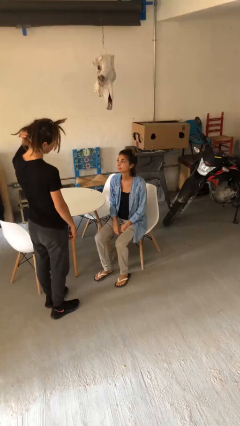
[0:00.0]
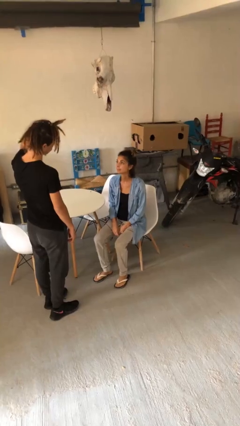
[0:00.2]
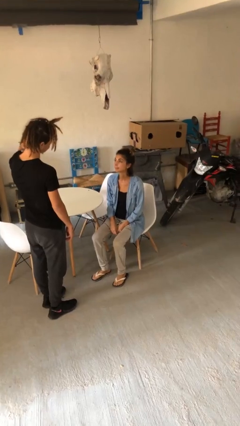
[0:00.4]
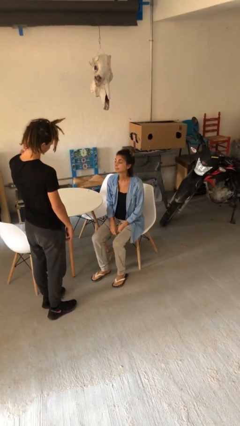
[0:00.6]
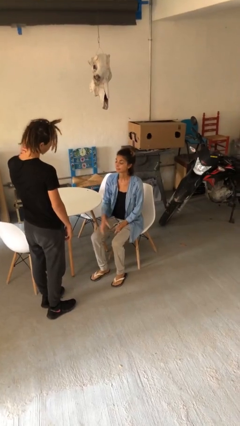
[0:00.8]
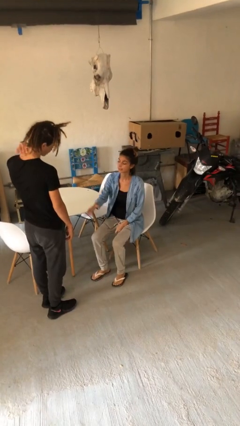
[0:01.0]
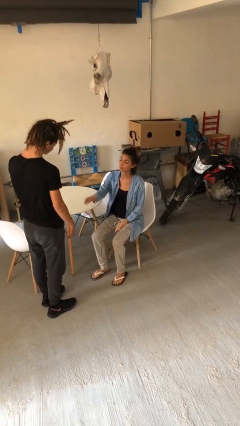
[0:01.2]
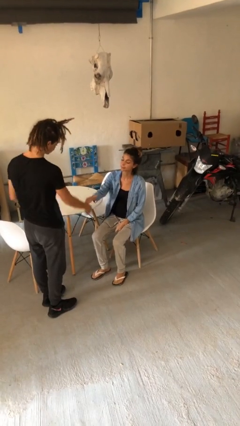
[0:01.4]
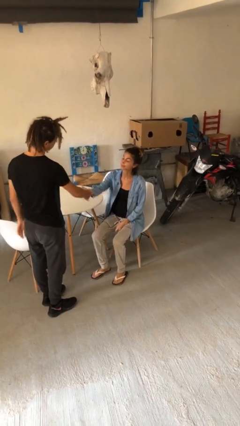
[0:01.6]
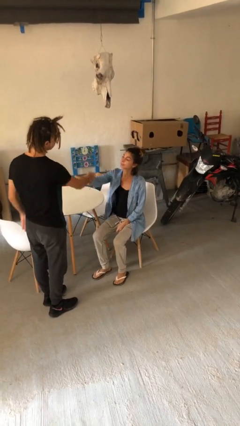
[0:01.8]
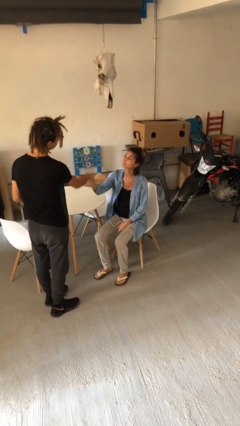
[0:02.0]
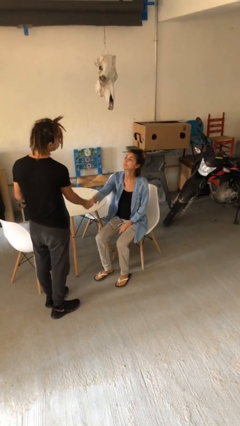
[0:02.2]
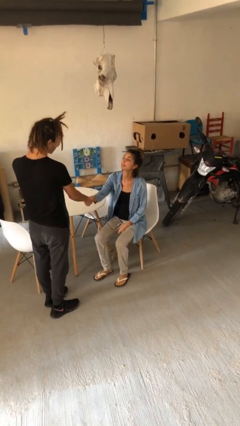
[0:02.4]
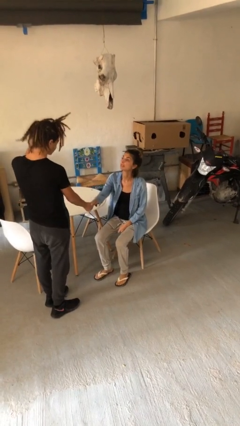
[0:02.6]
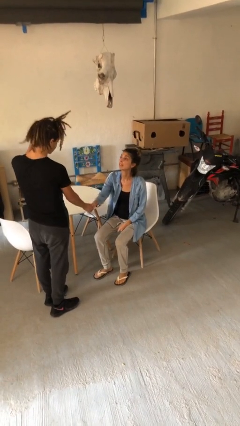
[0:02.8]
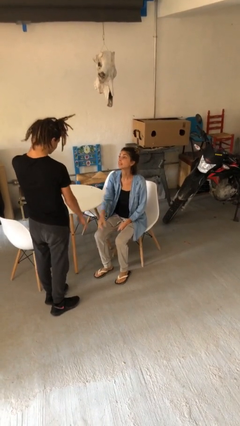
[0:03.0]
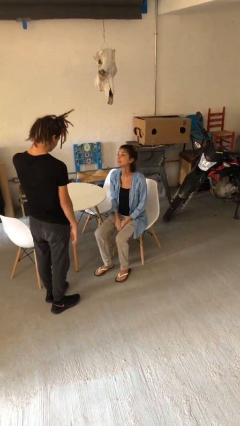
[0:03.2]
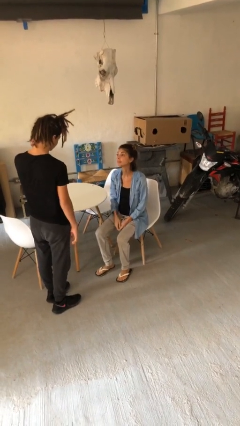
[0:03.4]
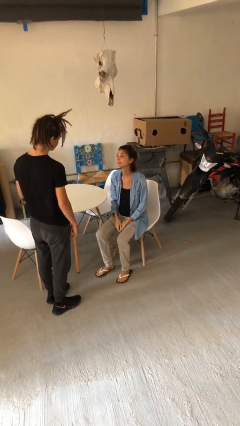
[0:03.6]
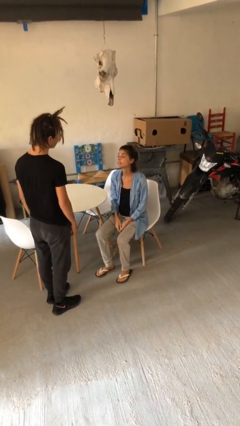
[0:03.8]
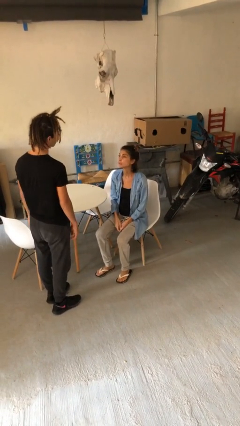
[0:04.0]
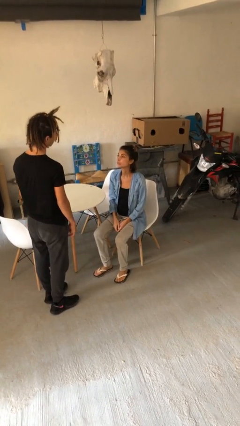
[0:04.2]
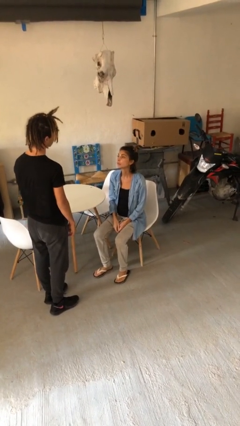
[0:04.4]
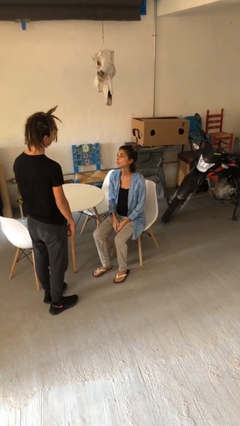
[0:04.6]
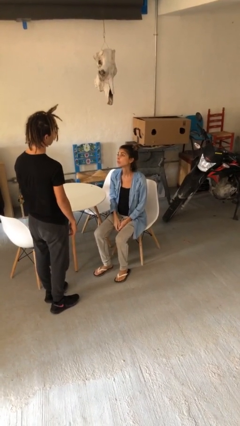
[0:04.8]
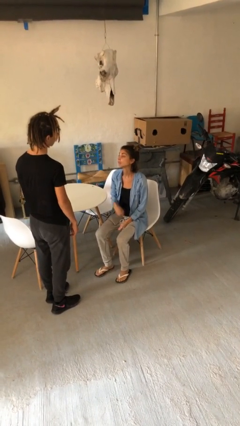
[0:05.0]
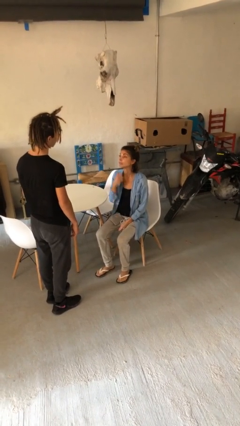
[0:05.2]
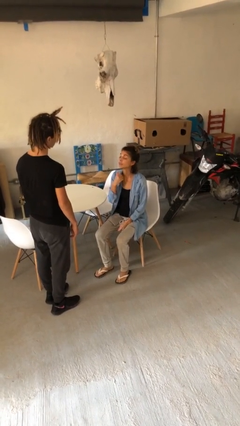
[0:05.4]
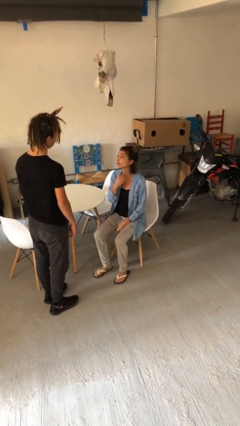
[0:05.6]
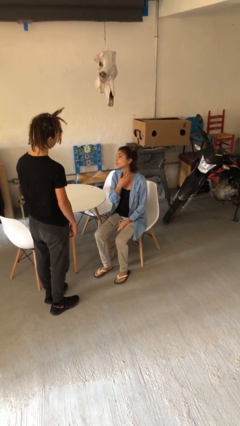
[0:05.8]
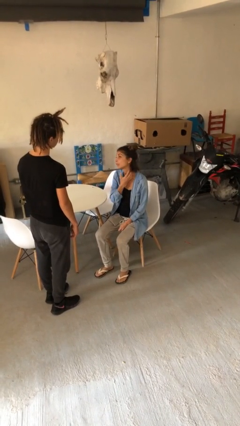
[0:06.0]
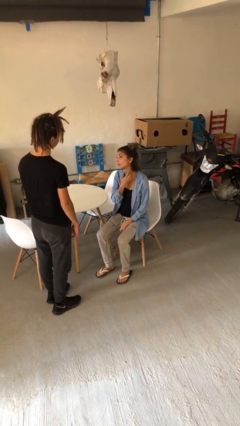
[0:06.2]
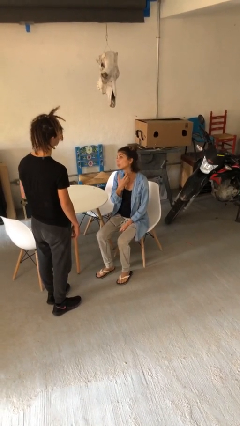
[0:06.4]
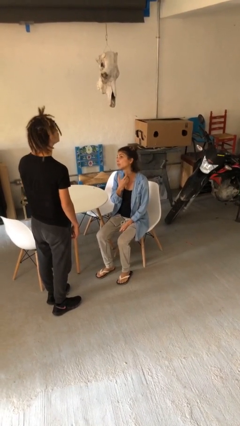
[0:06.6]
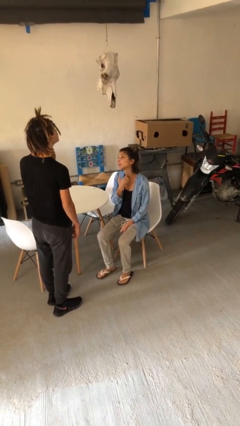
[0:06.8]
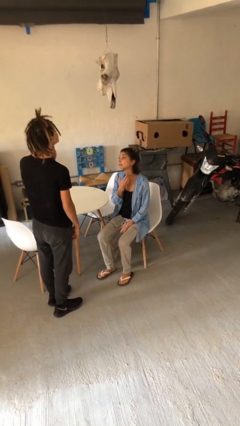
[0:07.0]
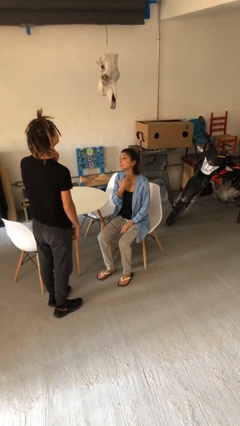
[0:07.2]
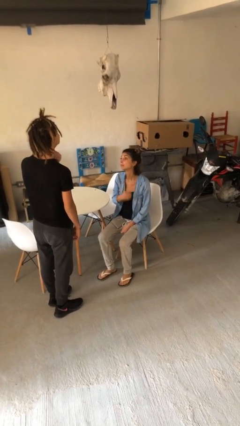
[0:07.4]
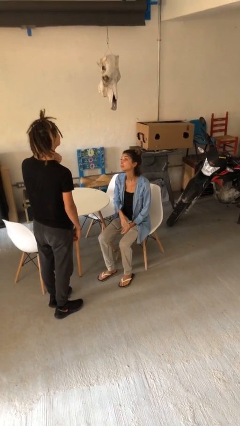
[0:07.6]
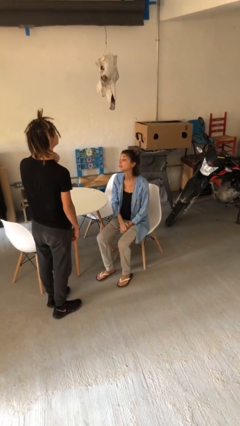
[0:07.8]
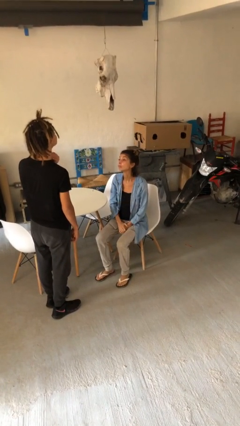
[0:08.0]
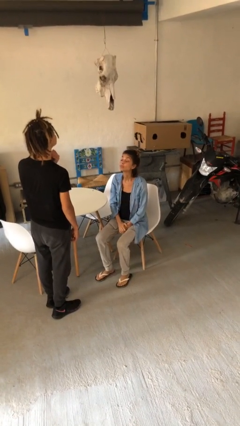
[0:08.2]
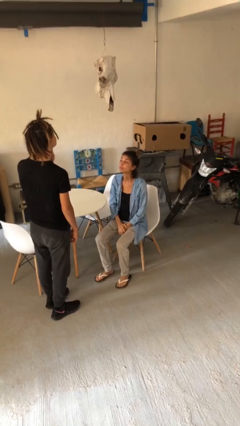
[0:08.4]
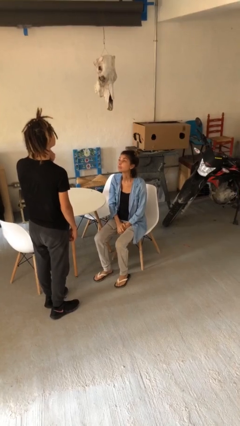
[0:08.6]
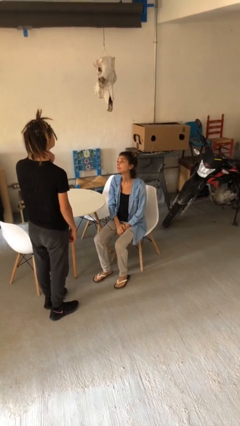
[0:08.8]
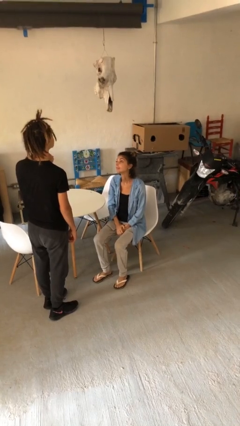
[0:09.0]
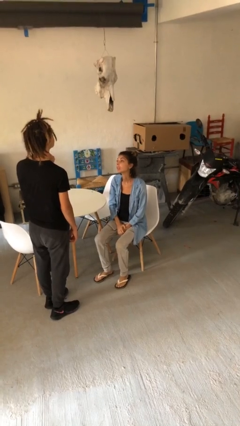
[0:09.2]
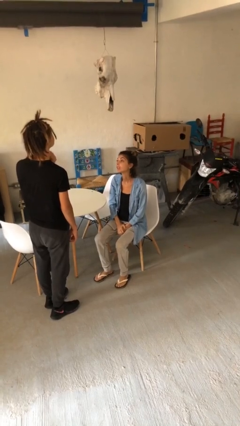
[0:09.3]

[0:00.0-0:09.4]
person shakes hand

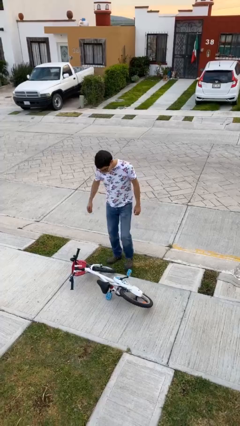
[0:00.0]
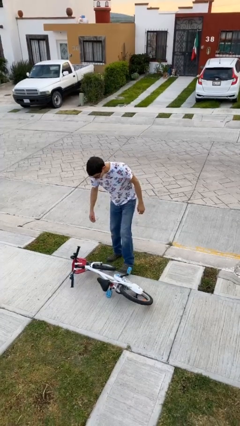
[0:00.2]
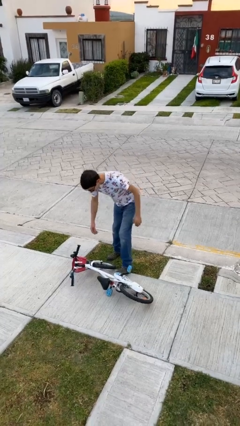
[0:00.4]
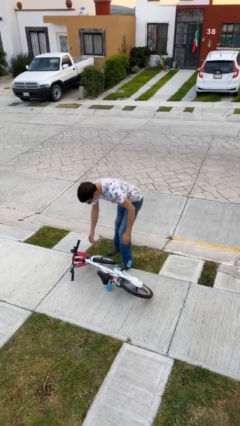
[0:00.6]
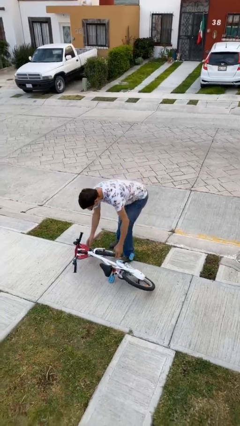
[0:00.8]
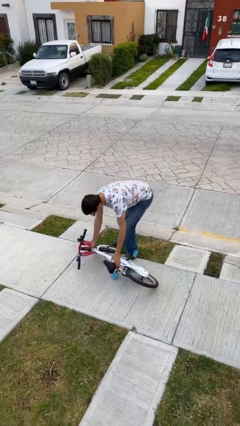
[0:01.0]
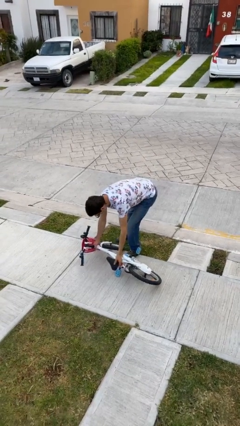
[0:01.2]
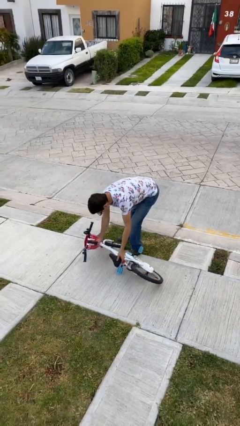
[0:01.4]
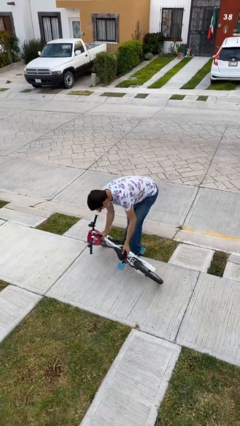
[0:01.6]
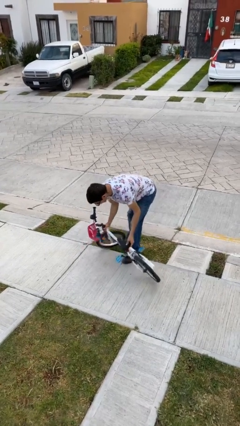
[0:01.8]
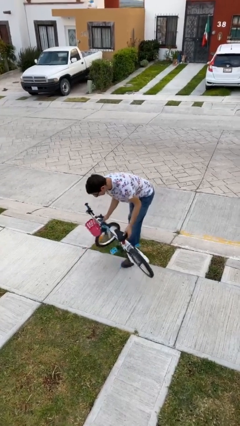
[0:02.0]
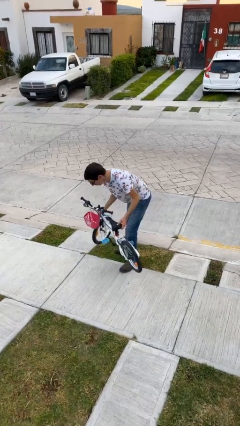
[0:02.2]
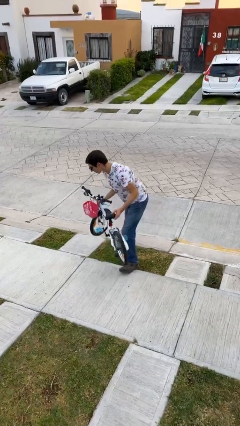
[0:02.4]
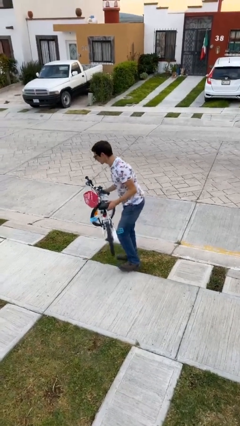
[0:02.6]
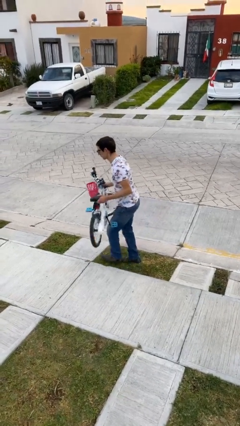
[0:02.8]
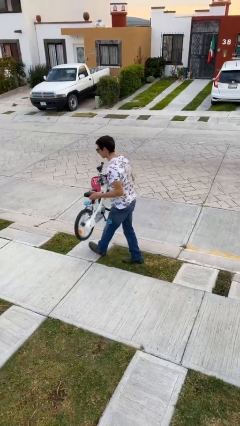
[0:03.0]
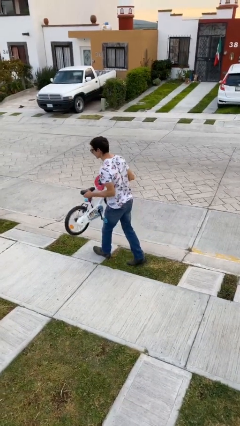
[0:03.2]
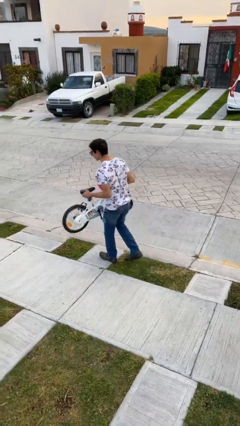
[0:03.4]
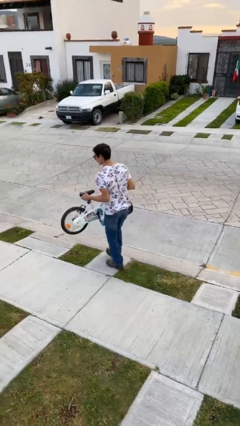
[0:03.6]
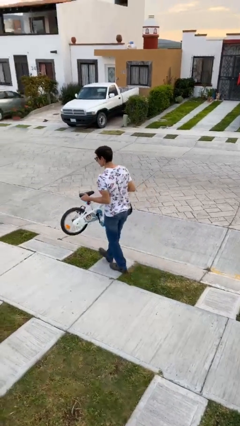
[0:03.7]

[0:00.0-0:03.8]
person picks up object from floor

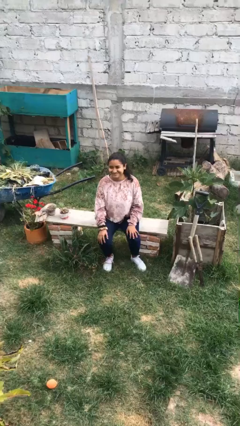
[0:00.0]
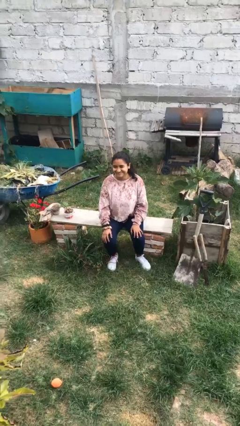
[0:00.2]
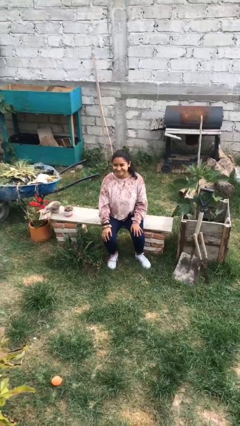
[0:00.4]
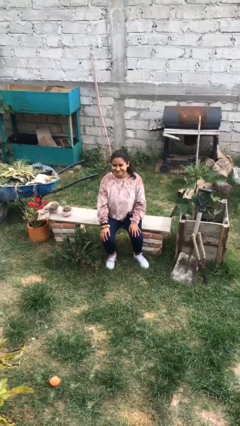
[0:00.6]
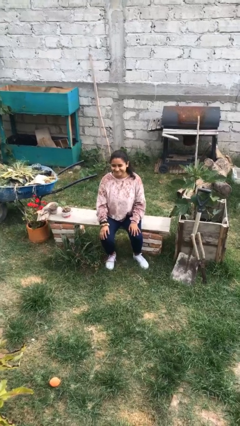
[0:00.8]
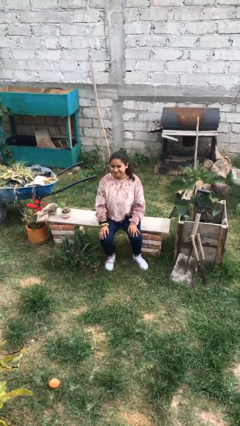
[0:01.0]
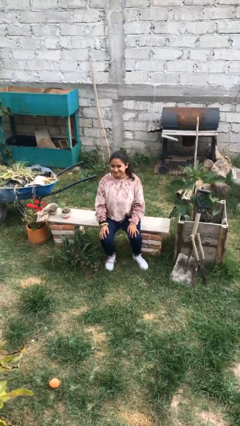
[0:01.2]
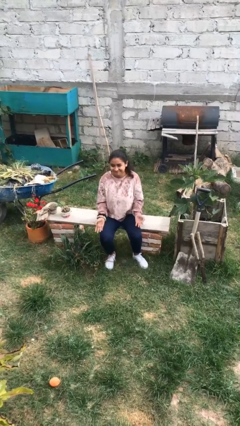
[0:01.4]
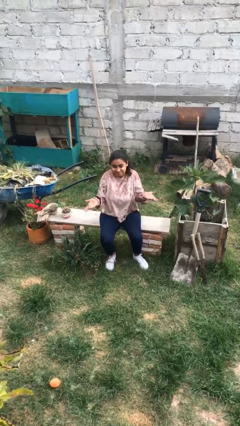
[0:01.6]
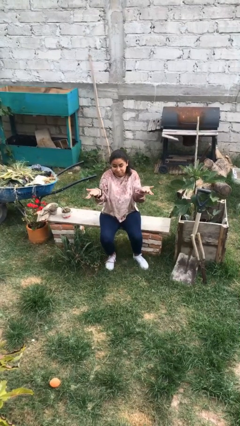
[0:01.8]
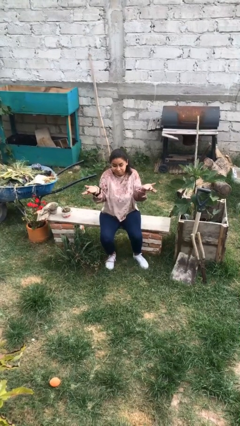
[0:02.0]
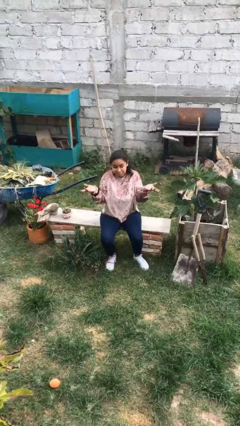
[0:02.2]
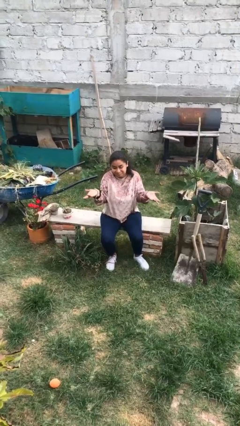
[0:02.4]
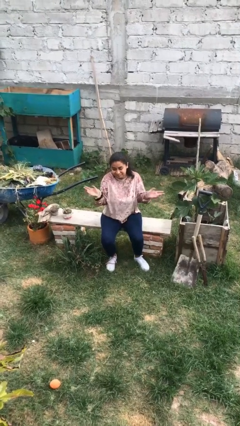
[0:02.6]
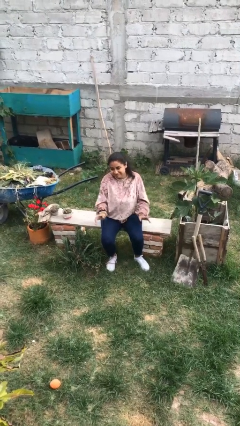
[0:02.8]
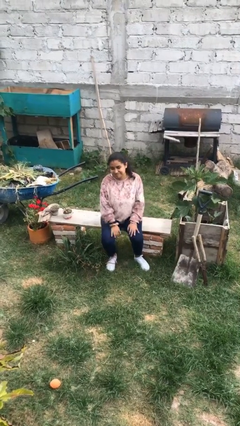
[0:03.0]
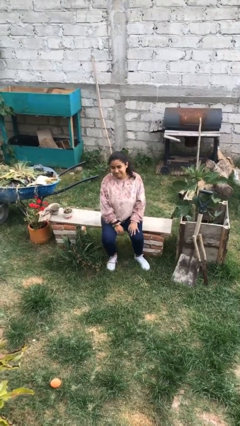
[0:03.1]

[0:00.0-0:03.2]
person shrugs

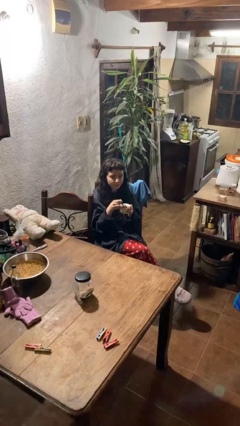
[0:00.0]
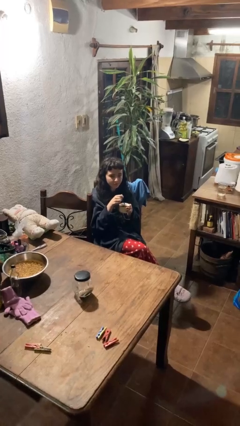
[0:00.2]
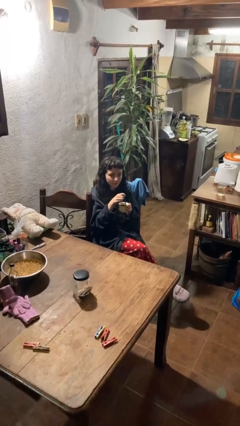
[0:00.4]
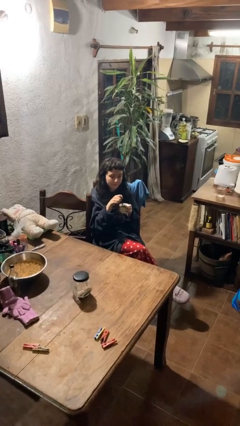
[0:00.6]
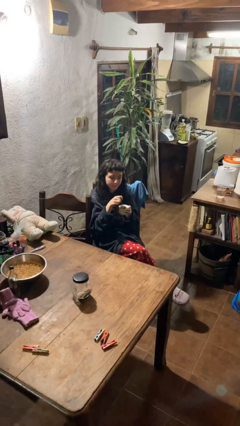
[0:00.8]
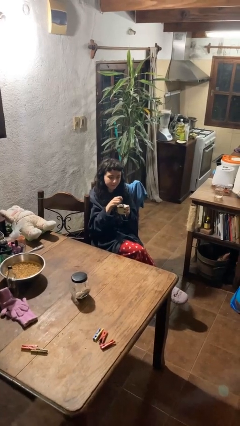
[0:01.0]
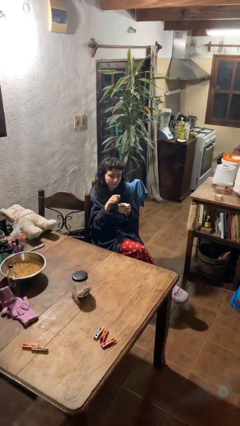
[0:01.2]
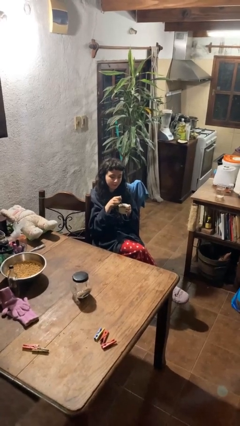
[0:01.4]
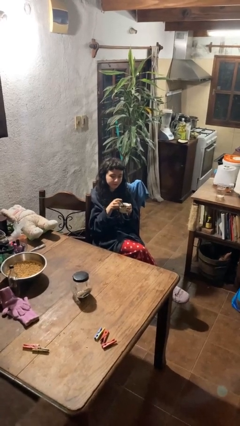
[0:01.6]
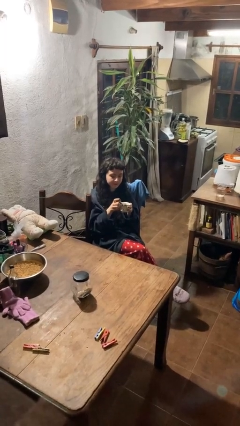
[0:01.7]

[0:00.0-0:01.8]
person stirs mug
